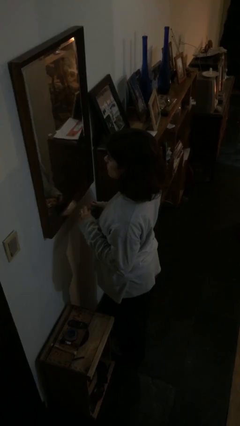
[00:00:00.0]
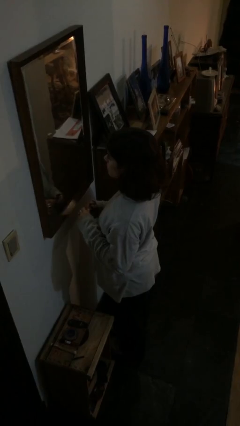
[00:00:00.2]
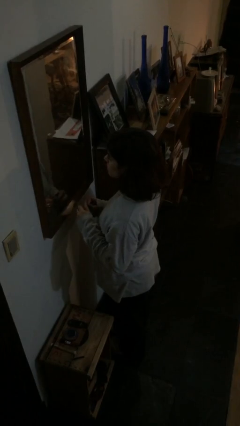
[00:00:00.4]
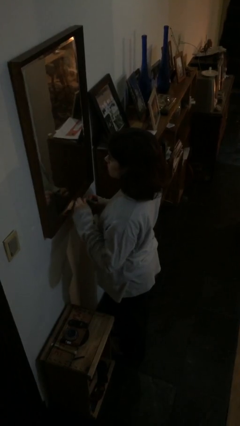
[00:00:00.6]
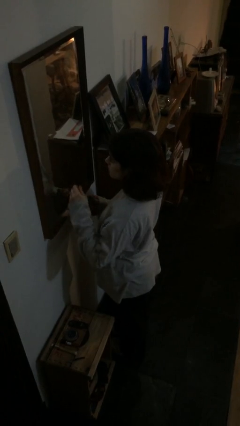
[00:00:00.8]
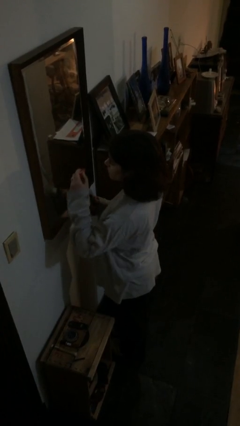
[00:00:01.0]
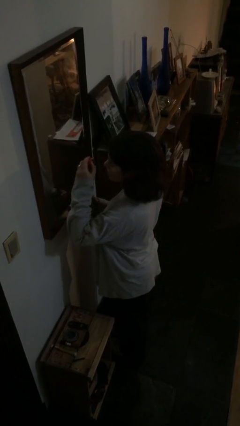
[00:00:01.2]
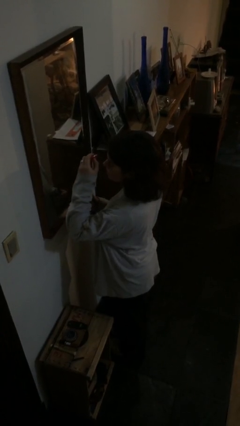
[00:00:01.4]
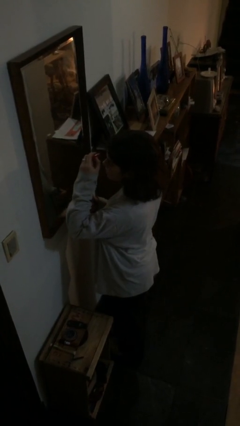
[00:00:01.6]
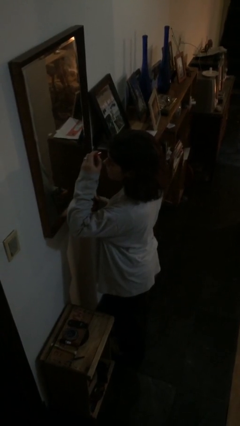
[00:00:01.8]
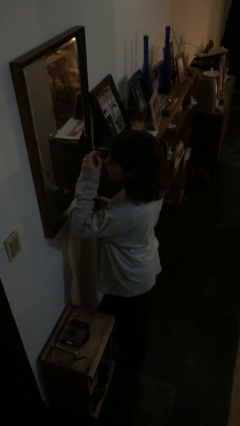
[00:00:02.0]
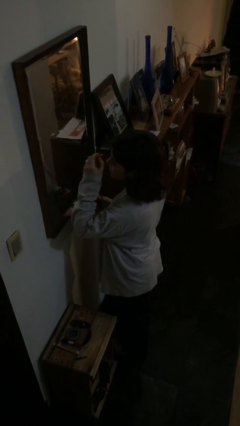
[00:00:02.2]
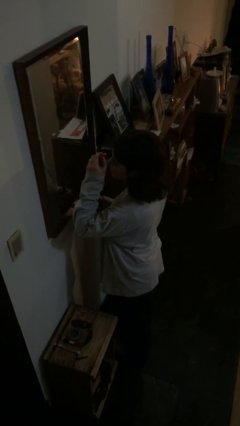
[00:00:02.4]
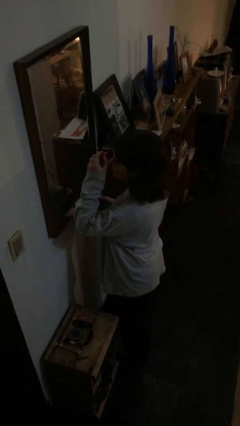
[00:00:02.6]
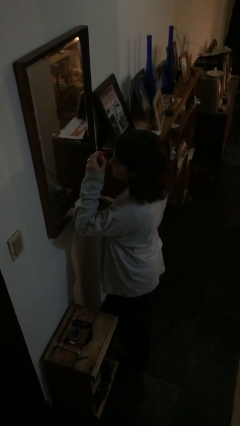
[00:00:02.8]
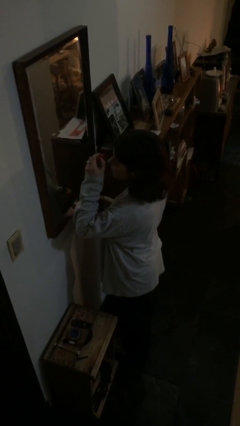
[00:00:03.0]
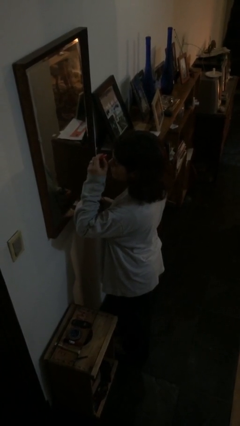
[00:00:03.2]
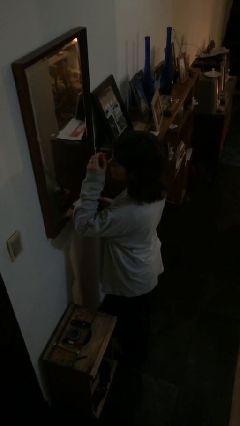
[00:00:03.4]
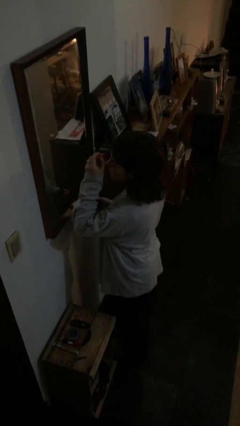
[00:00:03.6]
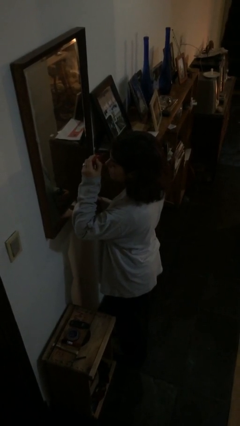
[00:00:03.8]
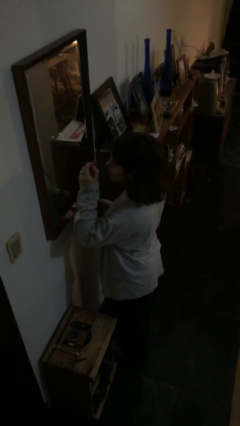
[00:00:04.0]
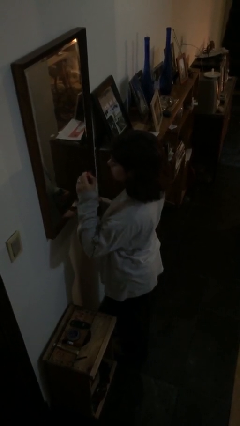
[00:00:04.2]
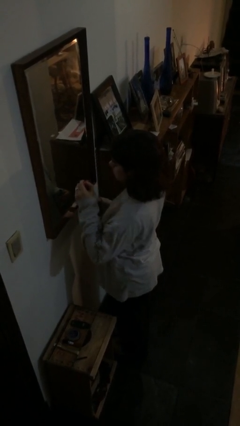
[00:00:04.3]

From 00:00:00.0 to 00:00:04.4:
person applies eye makeup

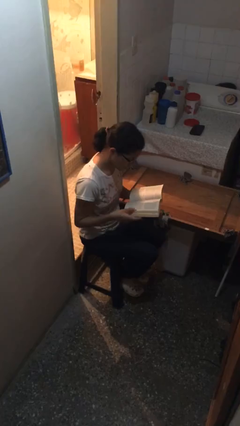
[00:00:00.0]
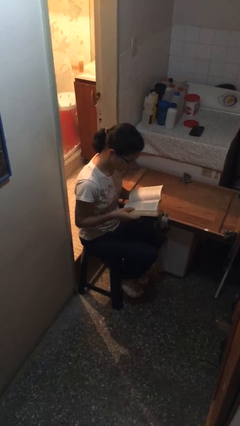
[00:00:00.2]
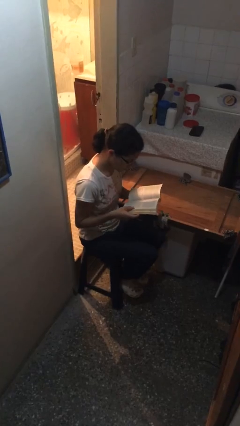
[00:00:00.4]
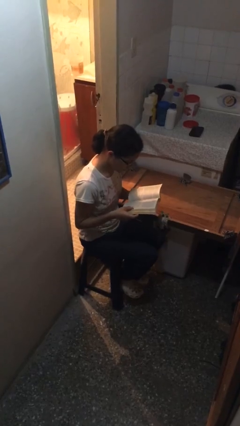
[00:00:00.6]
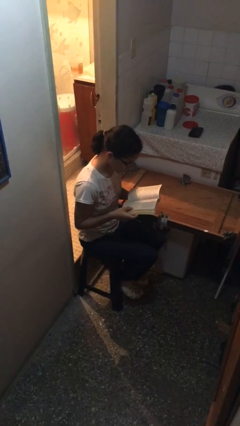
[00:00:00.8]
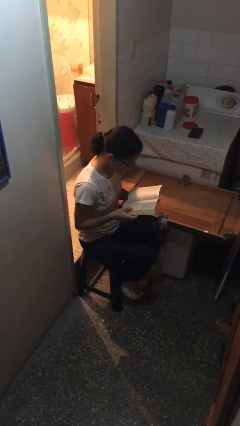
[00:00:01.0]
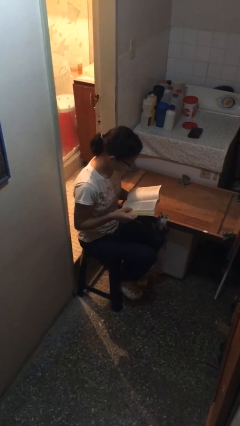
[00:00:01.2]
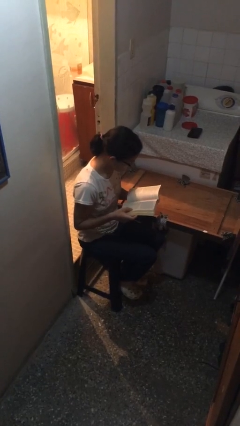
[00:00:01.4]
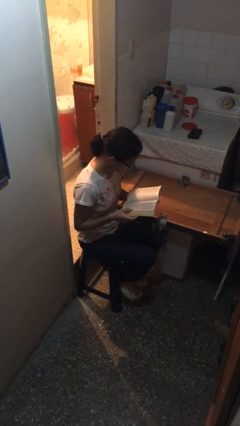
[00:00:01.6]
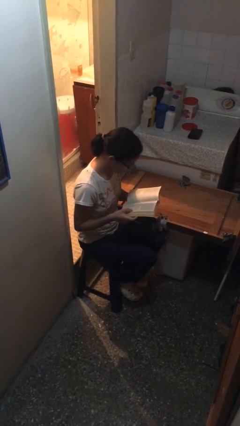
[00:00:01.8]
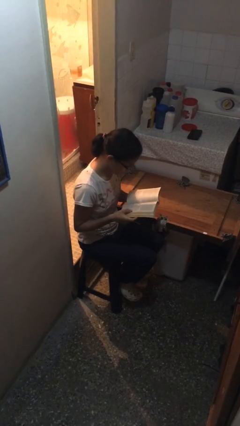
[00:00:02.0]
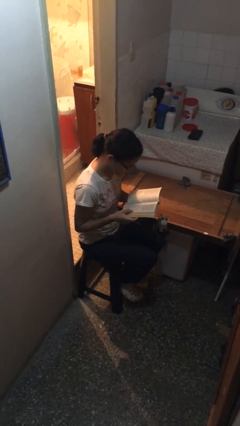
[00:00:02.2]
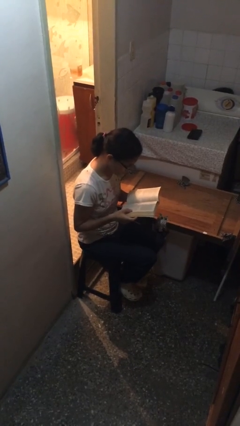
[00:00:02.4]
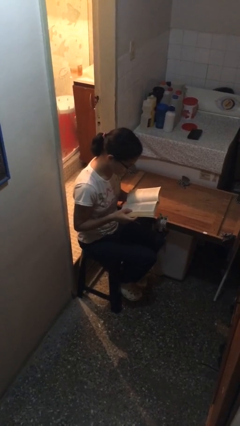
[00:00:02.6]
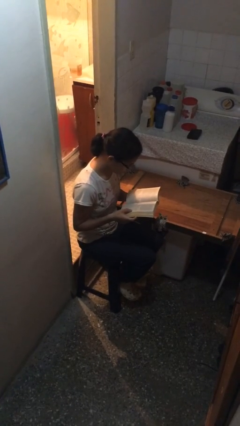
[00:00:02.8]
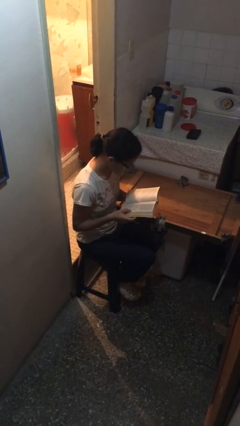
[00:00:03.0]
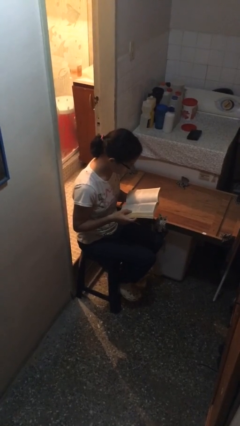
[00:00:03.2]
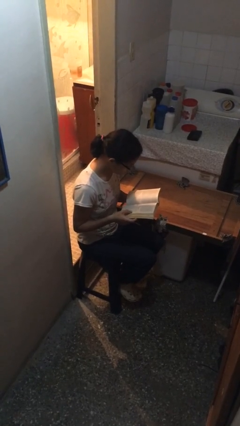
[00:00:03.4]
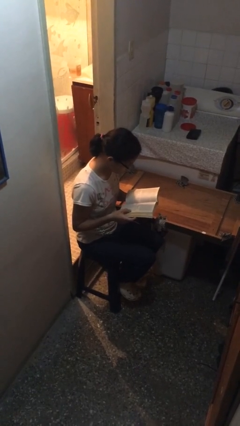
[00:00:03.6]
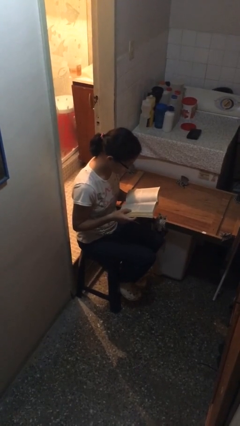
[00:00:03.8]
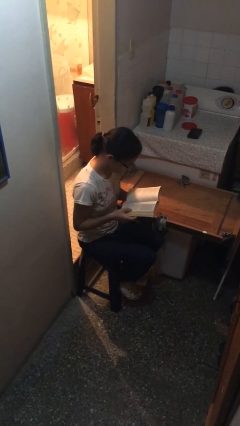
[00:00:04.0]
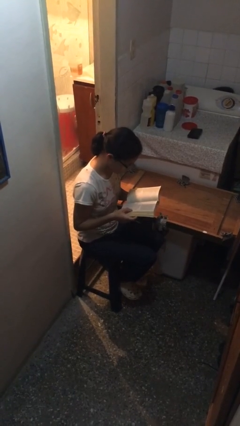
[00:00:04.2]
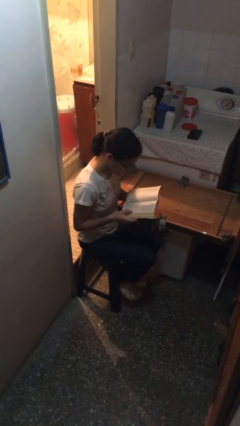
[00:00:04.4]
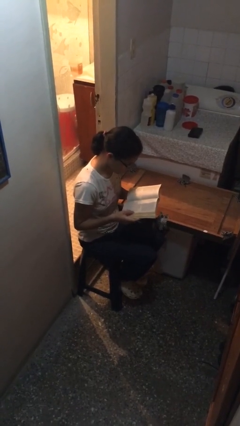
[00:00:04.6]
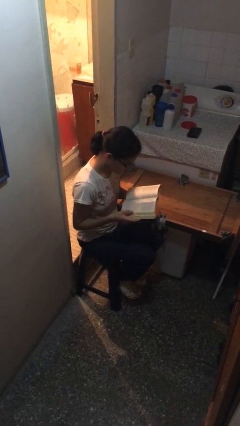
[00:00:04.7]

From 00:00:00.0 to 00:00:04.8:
person reads document

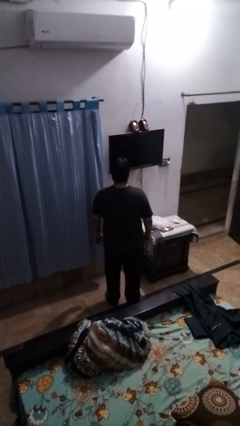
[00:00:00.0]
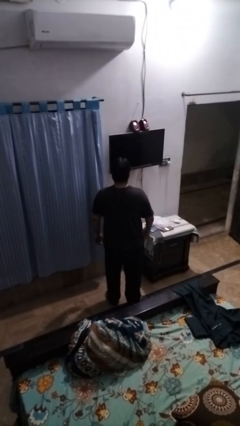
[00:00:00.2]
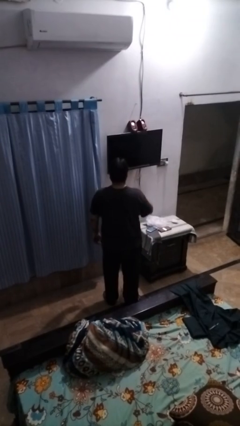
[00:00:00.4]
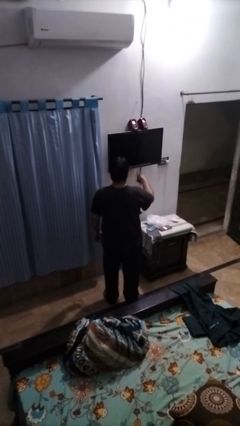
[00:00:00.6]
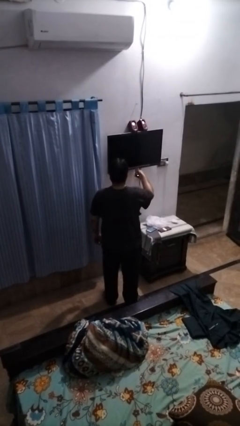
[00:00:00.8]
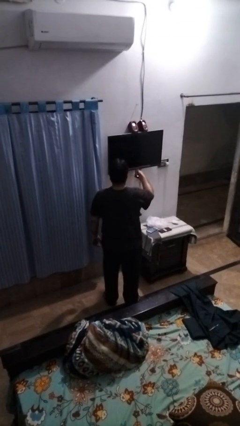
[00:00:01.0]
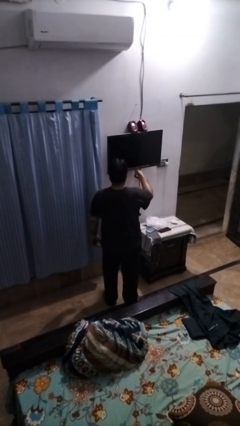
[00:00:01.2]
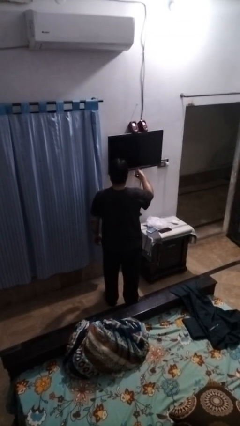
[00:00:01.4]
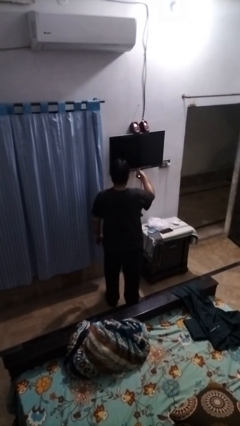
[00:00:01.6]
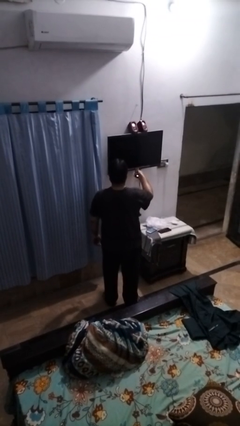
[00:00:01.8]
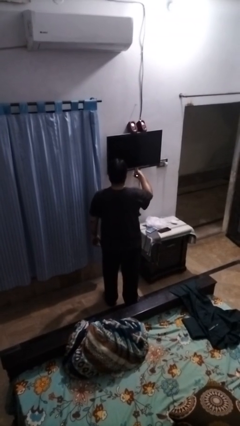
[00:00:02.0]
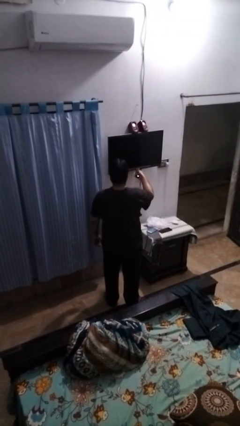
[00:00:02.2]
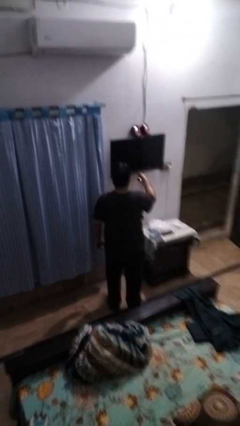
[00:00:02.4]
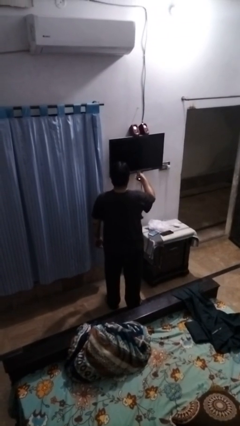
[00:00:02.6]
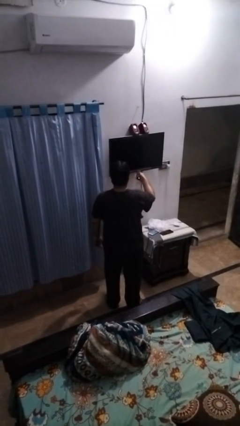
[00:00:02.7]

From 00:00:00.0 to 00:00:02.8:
person uses television remote

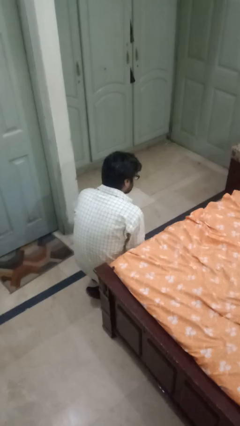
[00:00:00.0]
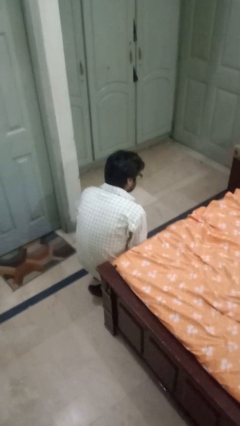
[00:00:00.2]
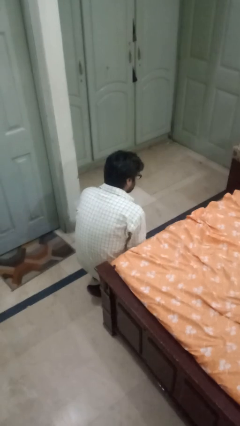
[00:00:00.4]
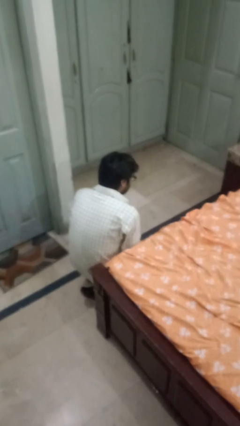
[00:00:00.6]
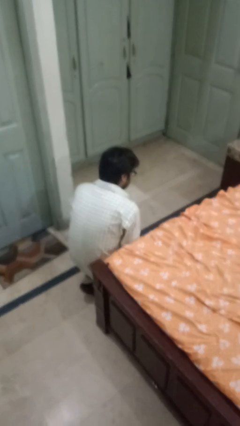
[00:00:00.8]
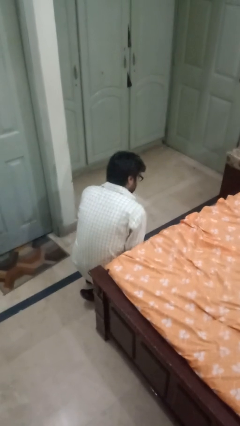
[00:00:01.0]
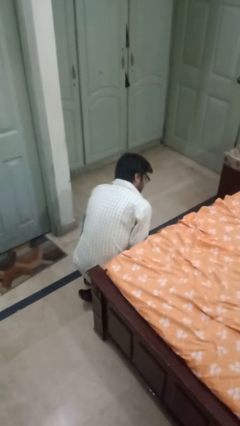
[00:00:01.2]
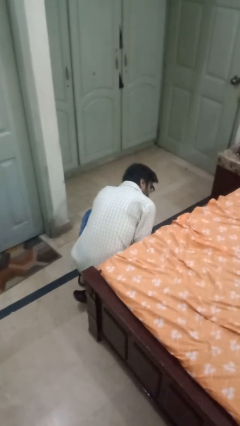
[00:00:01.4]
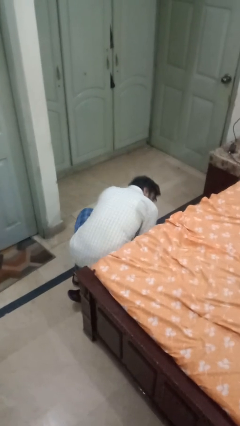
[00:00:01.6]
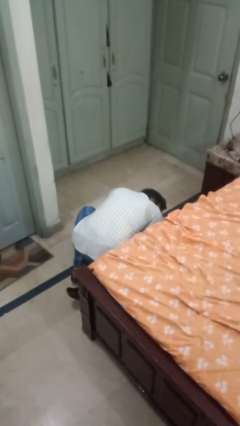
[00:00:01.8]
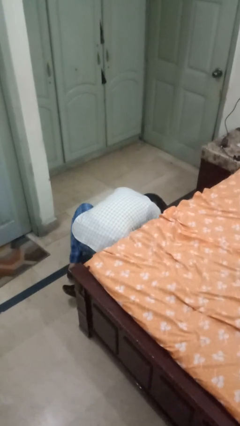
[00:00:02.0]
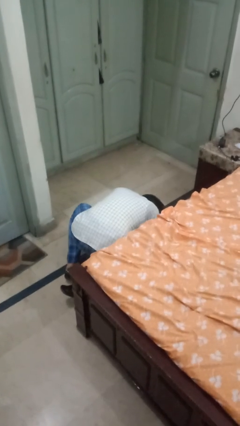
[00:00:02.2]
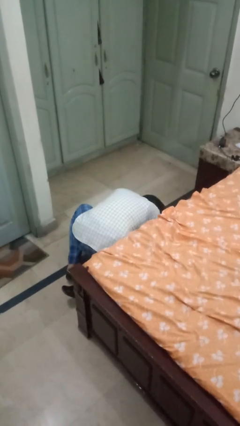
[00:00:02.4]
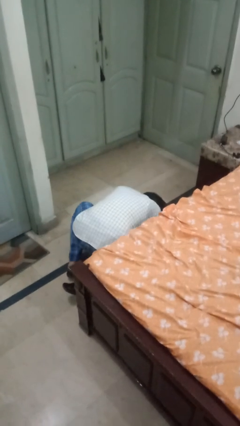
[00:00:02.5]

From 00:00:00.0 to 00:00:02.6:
person lies down on bed

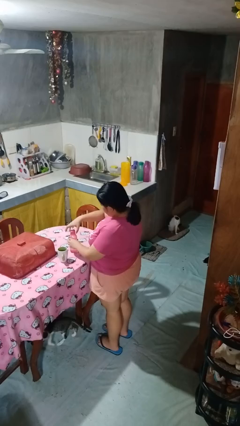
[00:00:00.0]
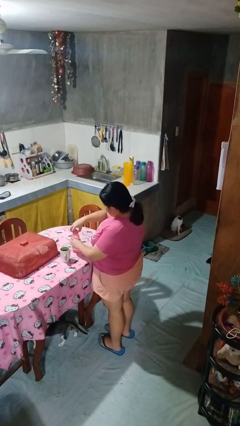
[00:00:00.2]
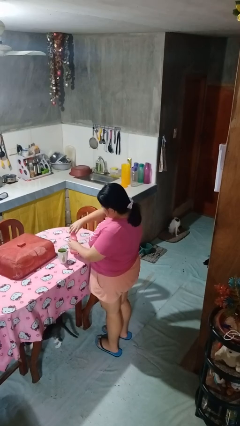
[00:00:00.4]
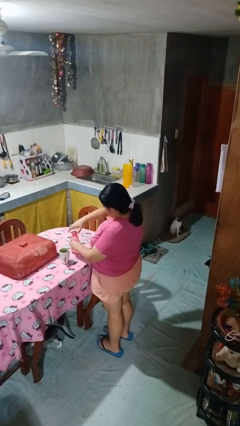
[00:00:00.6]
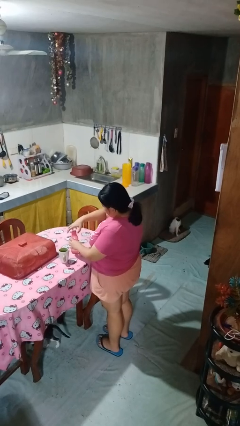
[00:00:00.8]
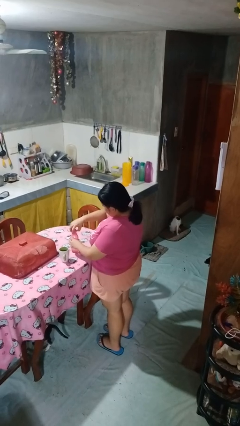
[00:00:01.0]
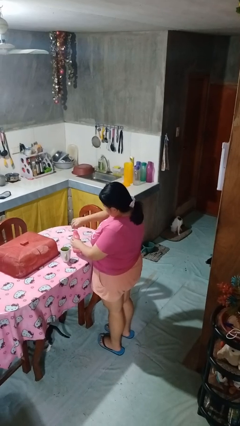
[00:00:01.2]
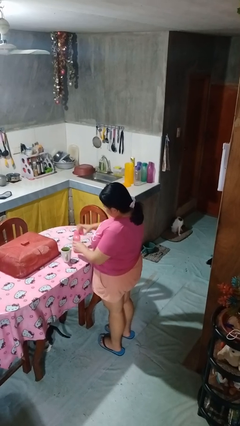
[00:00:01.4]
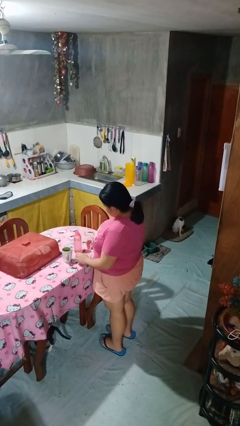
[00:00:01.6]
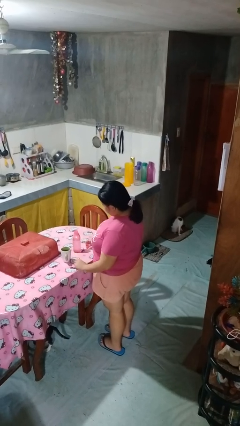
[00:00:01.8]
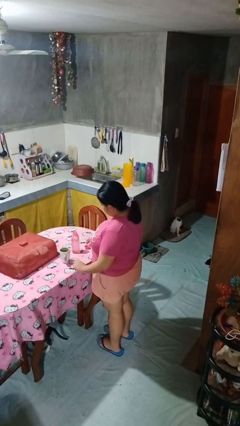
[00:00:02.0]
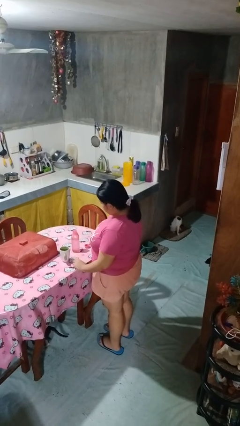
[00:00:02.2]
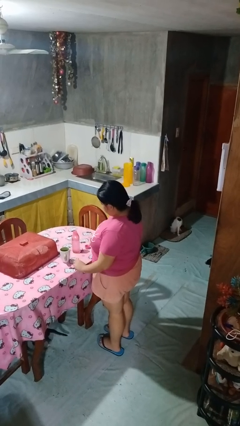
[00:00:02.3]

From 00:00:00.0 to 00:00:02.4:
person unscrews lid from bottle
